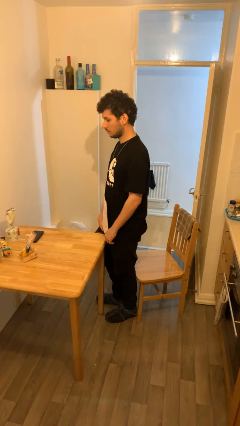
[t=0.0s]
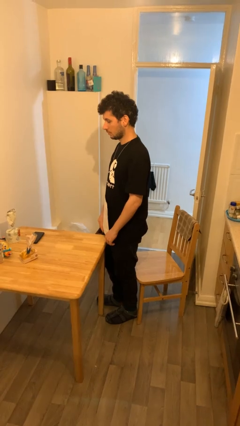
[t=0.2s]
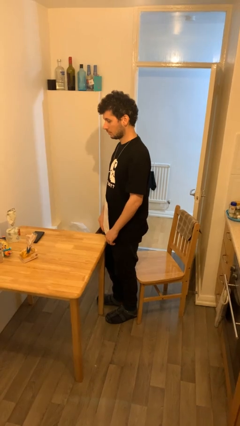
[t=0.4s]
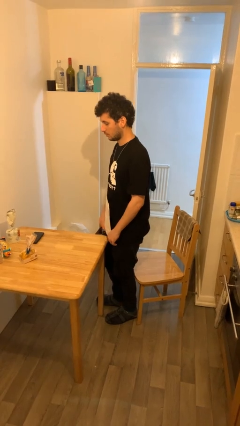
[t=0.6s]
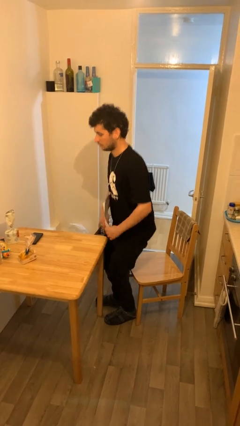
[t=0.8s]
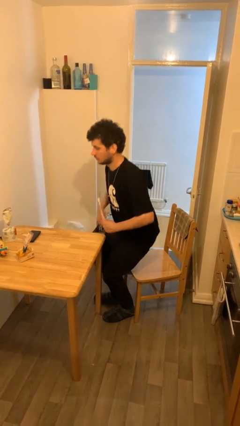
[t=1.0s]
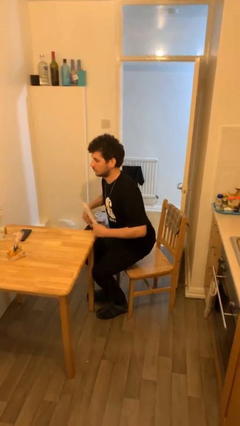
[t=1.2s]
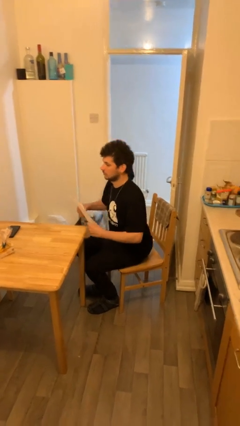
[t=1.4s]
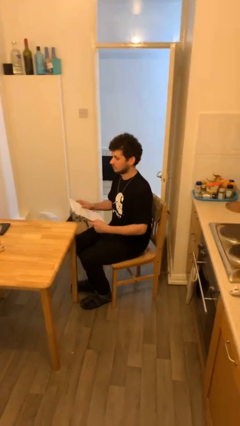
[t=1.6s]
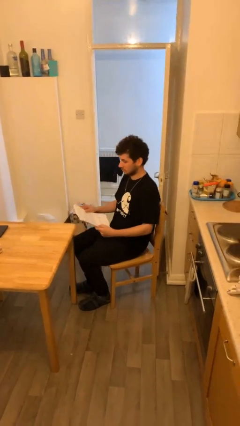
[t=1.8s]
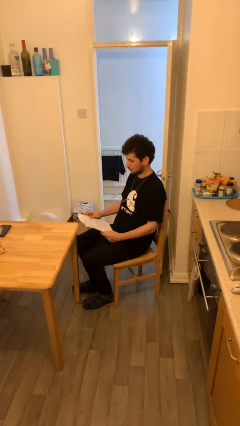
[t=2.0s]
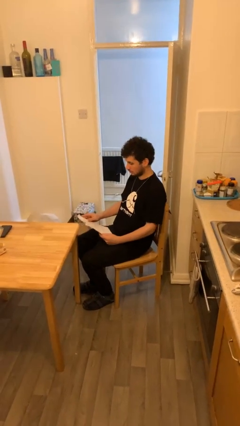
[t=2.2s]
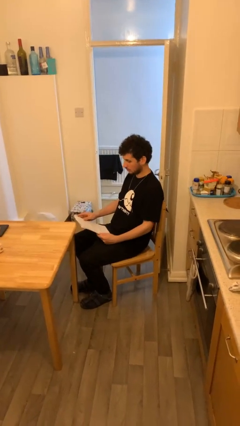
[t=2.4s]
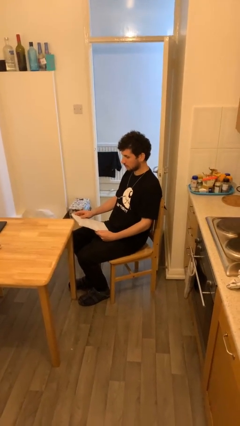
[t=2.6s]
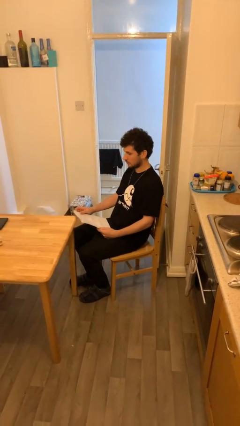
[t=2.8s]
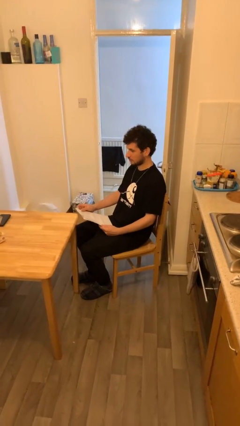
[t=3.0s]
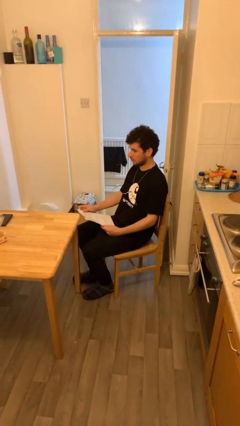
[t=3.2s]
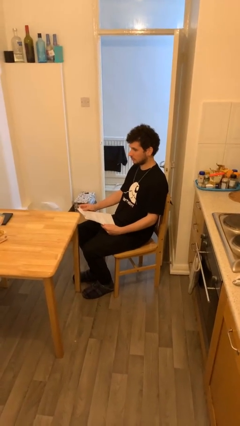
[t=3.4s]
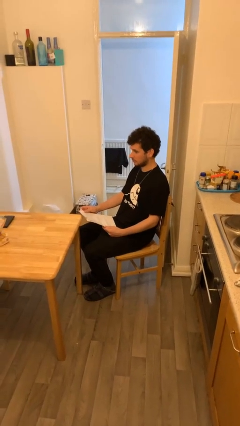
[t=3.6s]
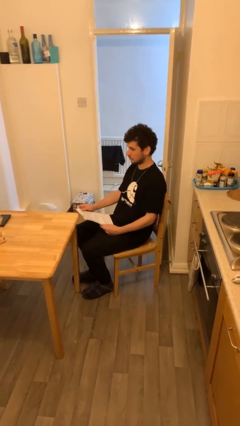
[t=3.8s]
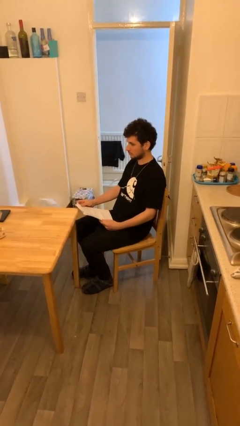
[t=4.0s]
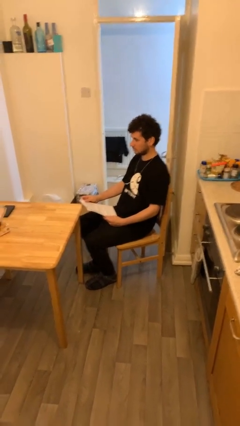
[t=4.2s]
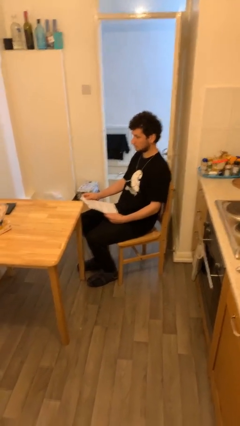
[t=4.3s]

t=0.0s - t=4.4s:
person sits down

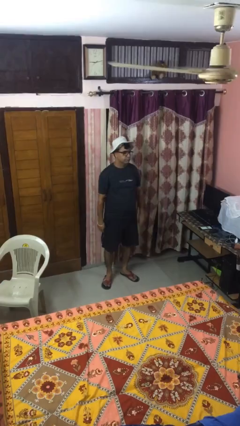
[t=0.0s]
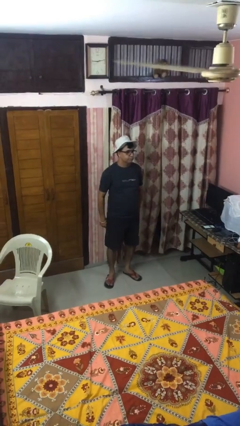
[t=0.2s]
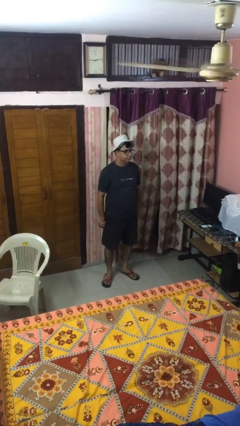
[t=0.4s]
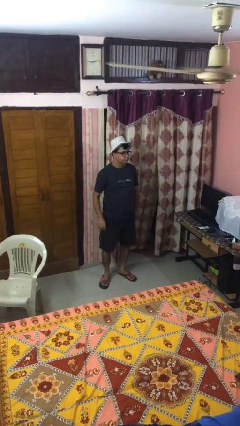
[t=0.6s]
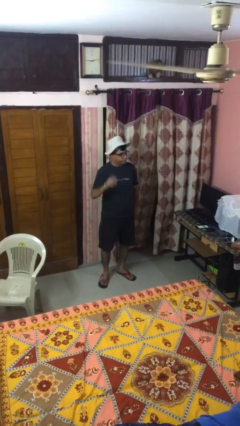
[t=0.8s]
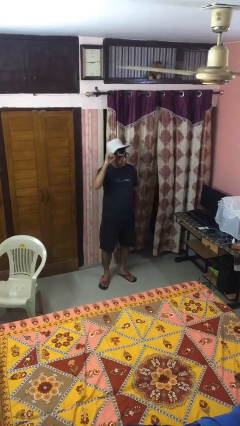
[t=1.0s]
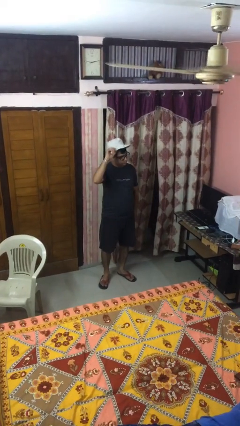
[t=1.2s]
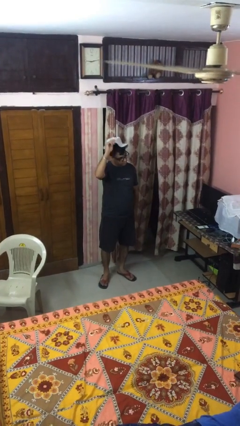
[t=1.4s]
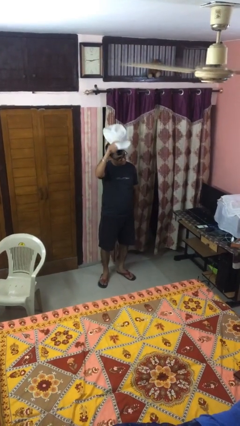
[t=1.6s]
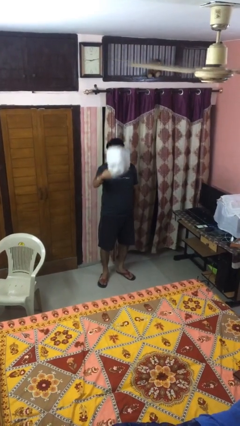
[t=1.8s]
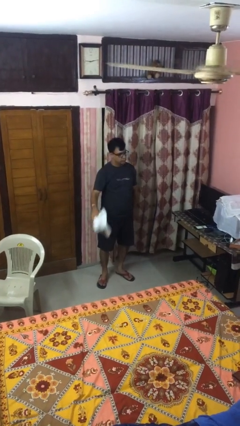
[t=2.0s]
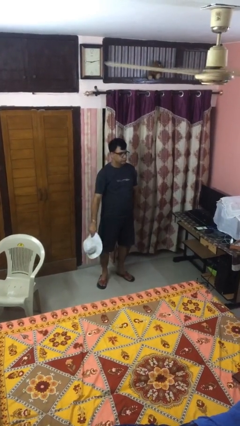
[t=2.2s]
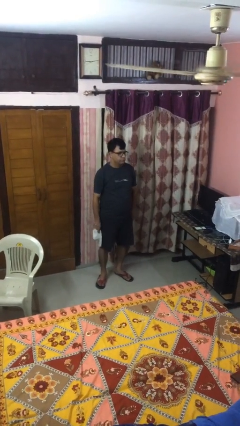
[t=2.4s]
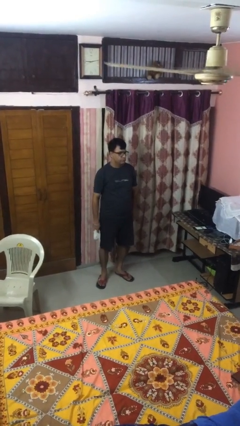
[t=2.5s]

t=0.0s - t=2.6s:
person takes off hat

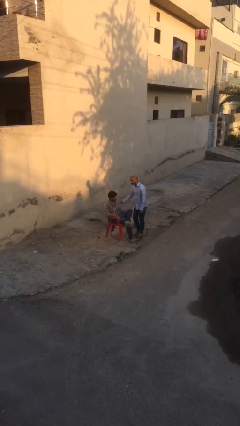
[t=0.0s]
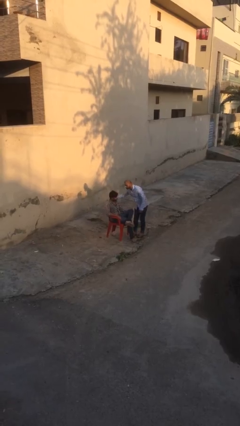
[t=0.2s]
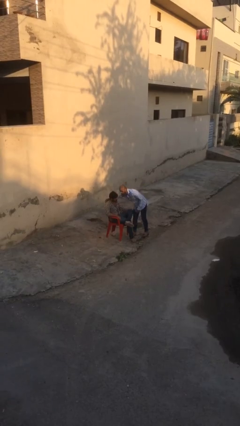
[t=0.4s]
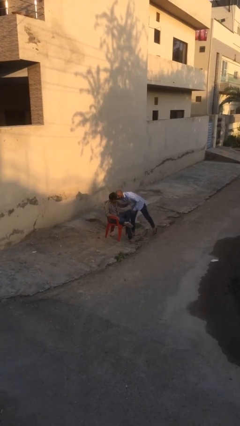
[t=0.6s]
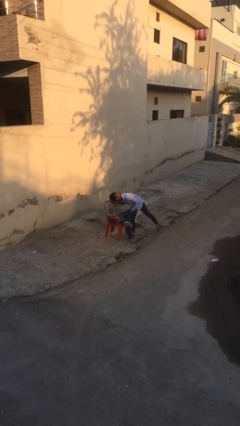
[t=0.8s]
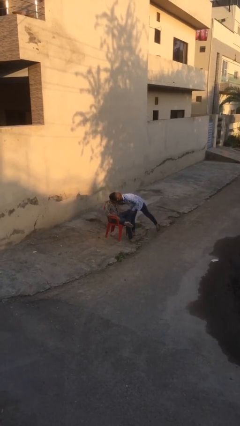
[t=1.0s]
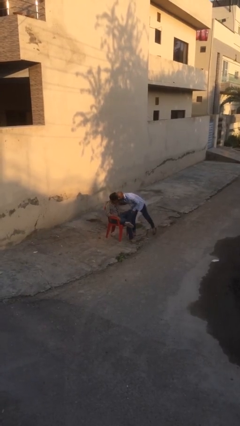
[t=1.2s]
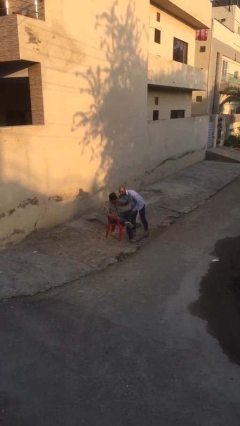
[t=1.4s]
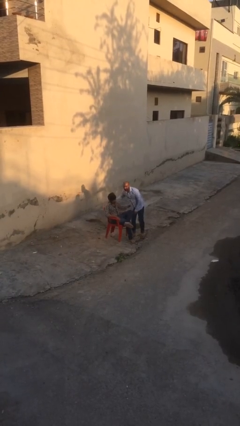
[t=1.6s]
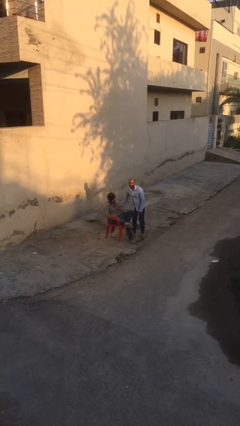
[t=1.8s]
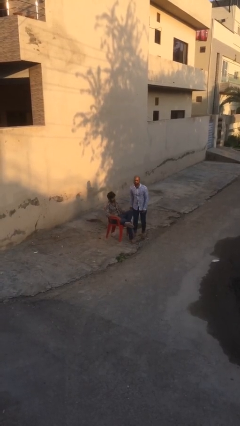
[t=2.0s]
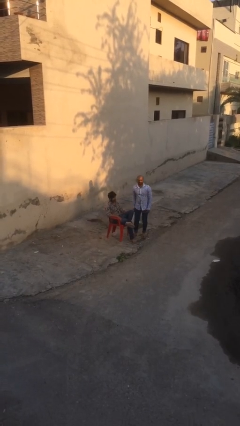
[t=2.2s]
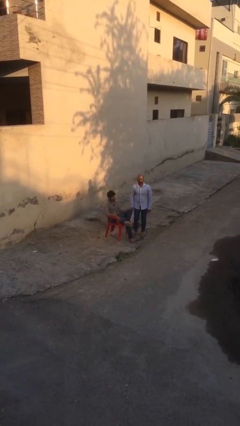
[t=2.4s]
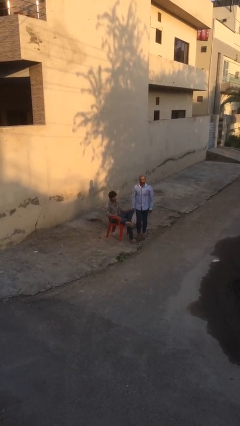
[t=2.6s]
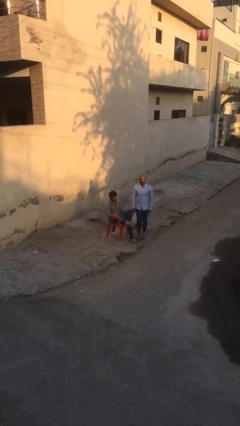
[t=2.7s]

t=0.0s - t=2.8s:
person embraces person

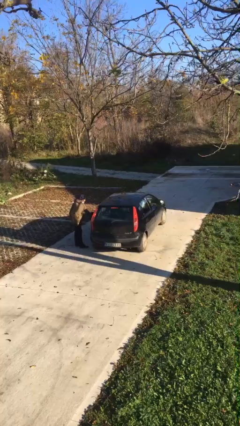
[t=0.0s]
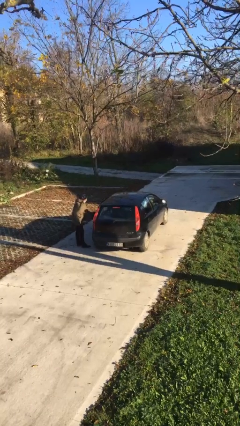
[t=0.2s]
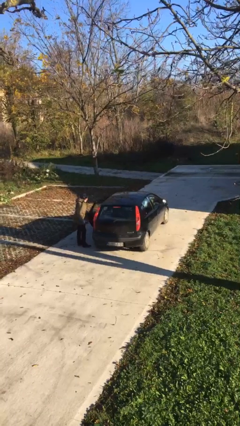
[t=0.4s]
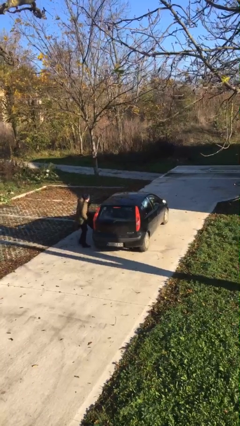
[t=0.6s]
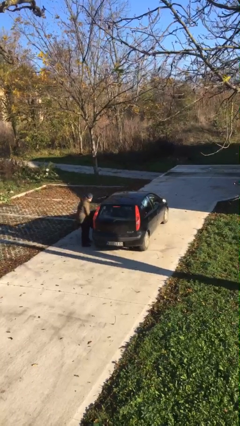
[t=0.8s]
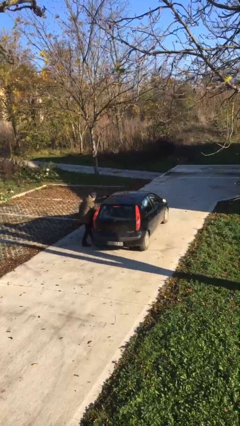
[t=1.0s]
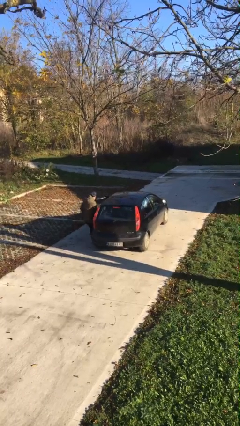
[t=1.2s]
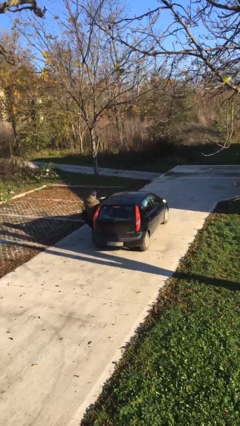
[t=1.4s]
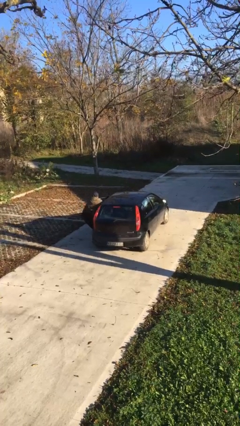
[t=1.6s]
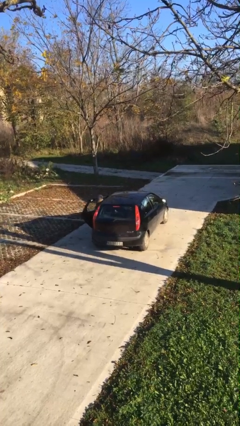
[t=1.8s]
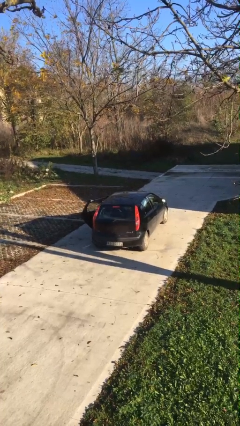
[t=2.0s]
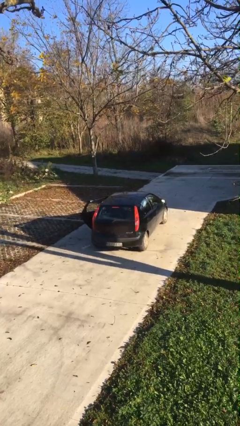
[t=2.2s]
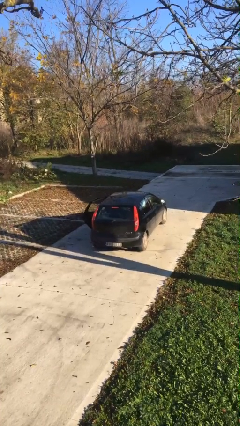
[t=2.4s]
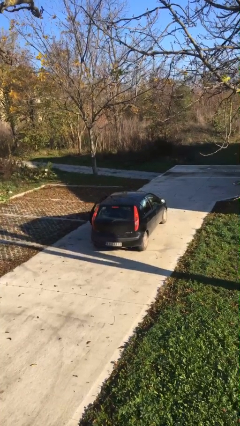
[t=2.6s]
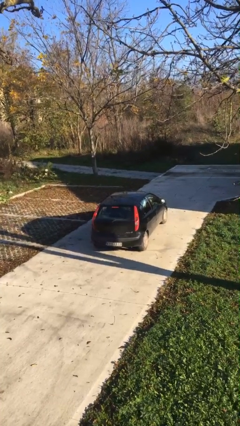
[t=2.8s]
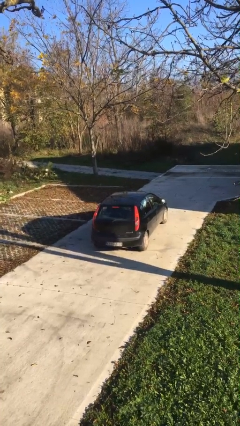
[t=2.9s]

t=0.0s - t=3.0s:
car picks up person

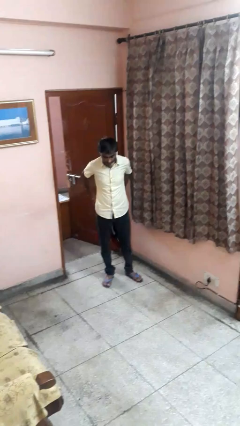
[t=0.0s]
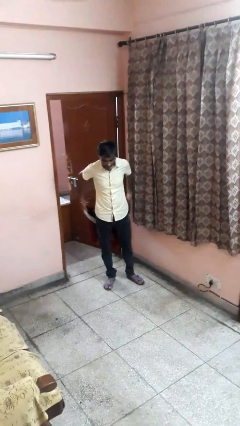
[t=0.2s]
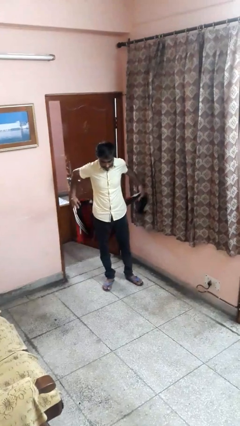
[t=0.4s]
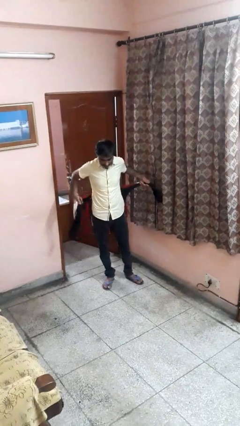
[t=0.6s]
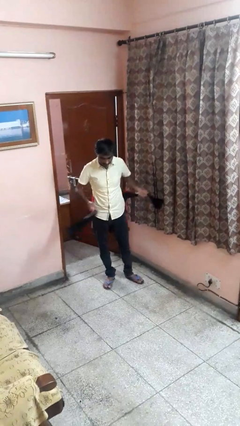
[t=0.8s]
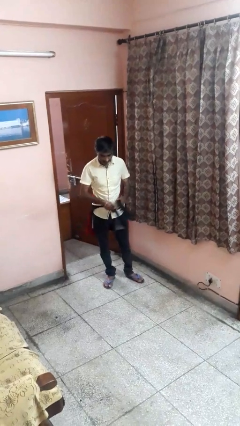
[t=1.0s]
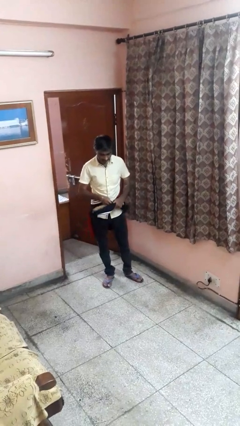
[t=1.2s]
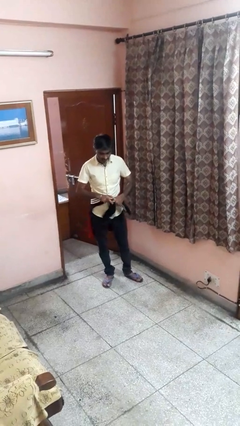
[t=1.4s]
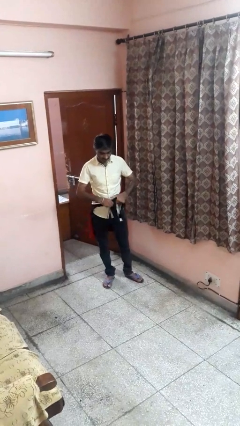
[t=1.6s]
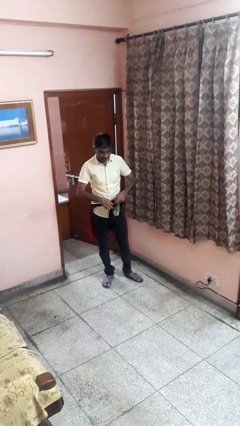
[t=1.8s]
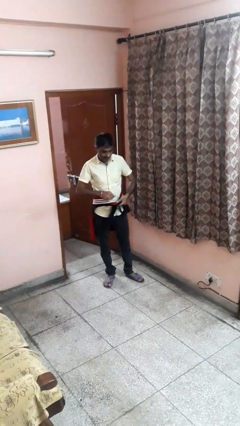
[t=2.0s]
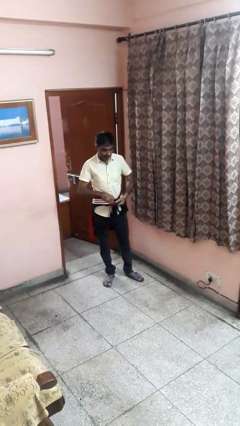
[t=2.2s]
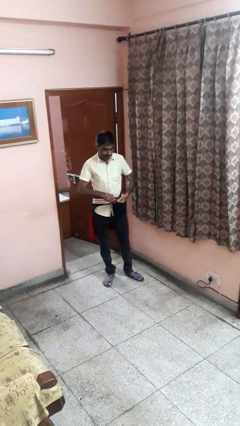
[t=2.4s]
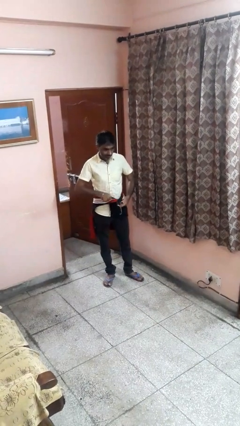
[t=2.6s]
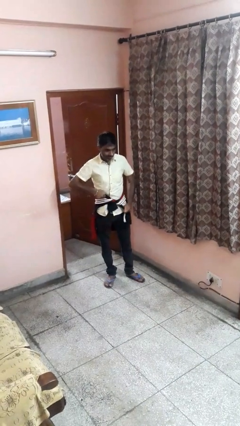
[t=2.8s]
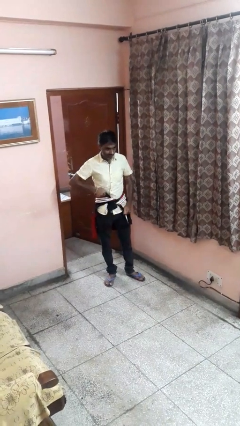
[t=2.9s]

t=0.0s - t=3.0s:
person ties jacket around waist

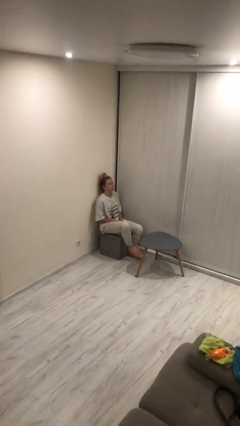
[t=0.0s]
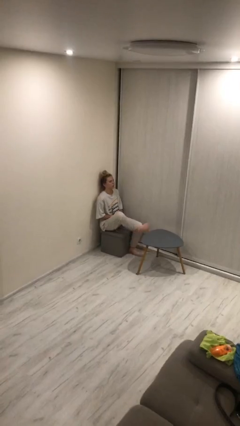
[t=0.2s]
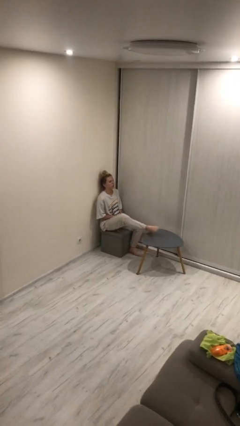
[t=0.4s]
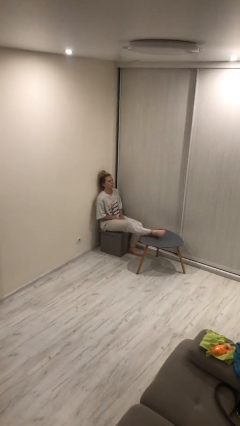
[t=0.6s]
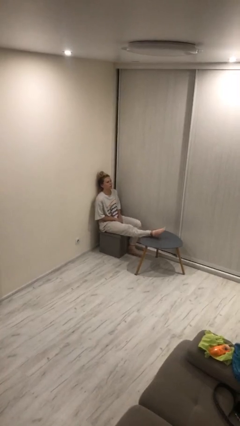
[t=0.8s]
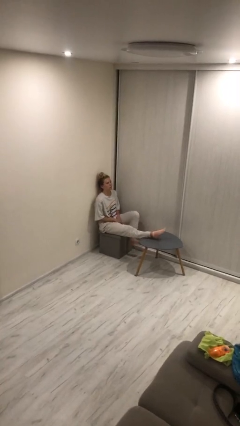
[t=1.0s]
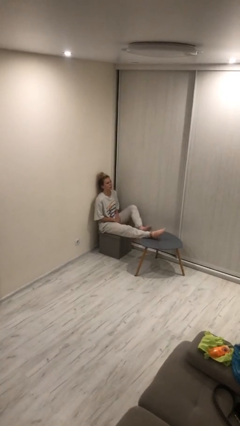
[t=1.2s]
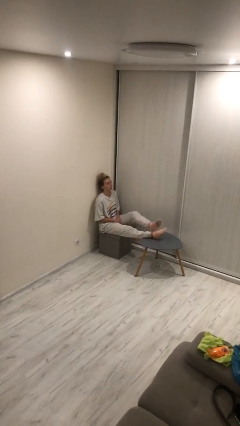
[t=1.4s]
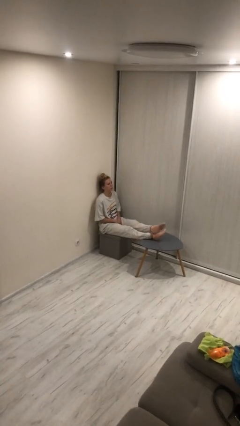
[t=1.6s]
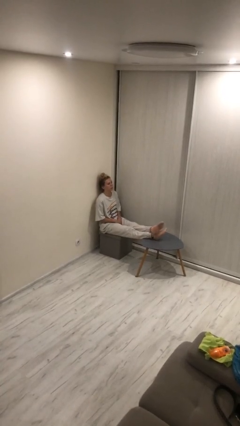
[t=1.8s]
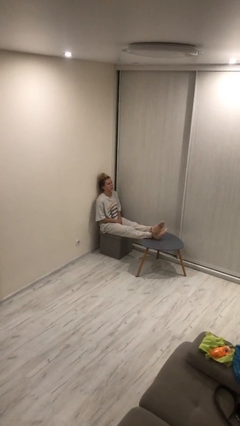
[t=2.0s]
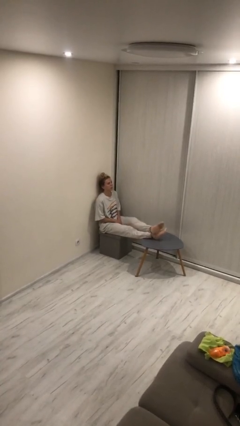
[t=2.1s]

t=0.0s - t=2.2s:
person puts feet up
